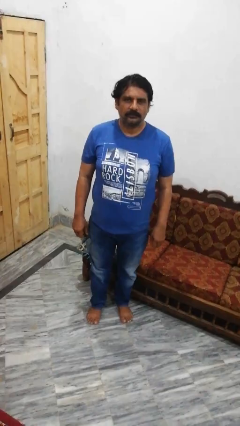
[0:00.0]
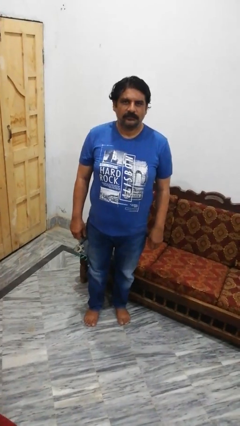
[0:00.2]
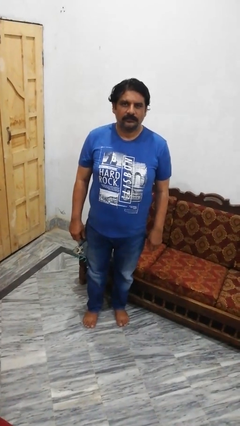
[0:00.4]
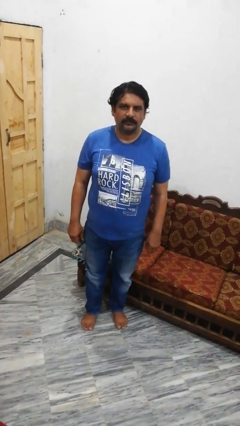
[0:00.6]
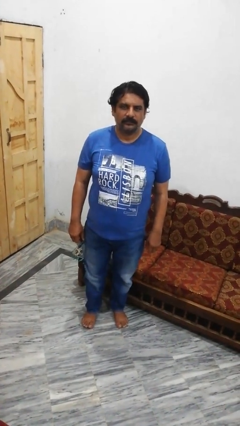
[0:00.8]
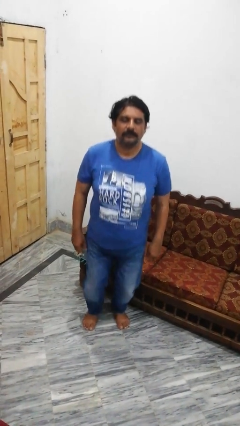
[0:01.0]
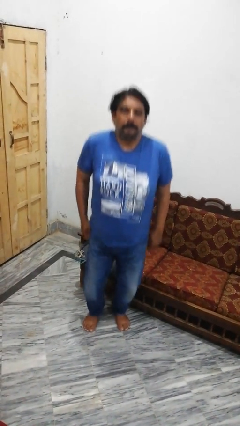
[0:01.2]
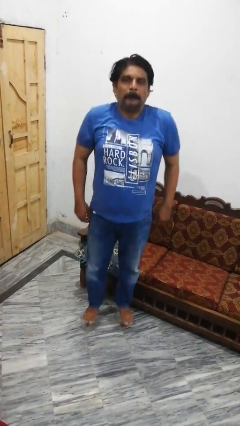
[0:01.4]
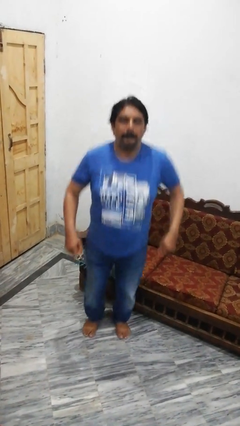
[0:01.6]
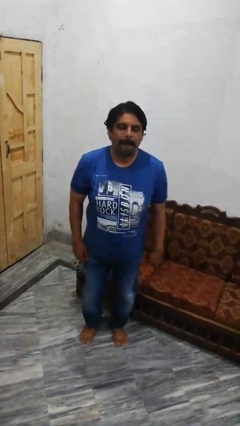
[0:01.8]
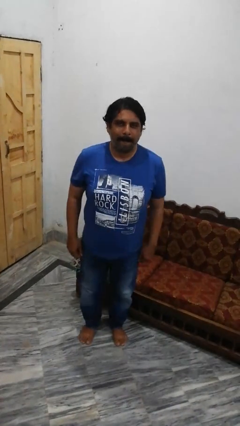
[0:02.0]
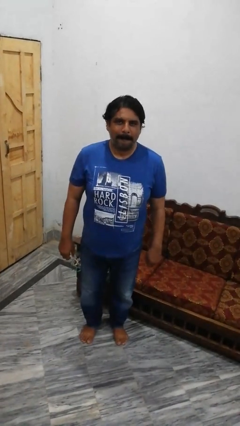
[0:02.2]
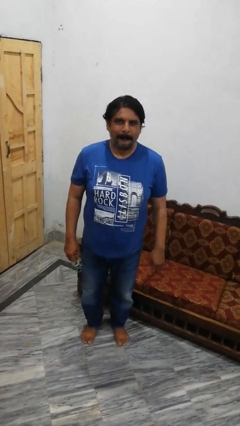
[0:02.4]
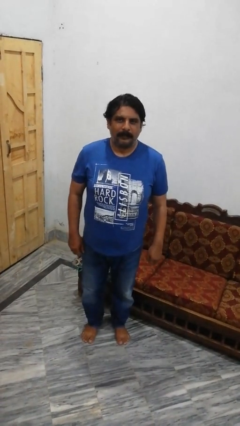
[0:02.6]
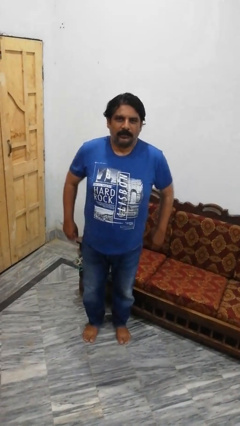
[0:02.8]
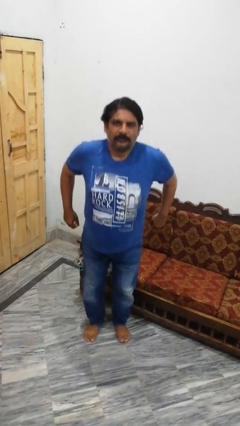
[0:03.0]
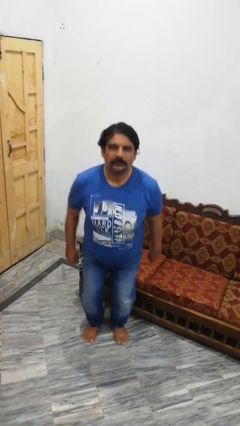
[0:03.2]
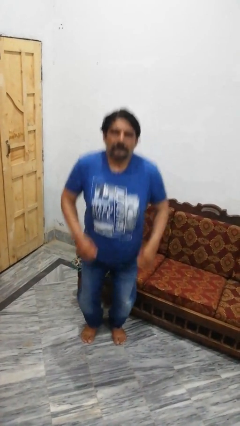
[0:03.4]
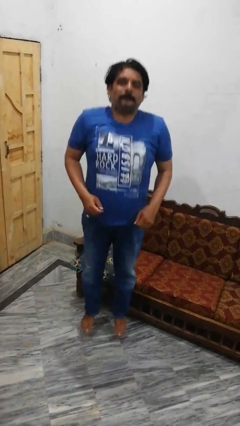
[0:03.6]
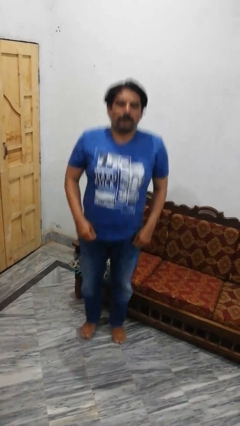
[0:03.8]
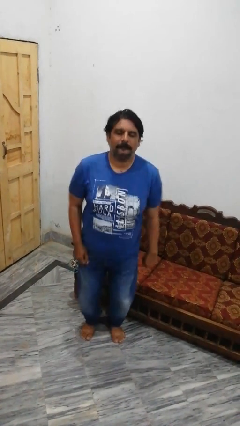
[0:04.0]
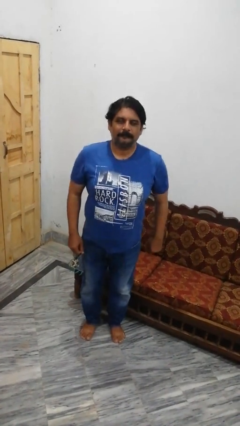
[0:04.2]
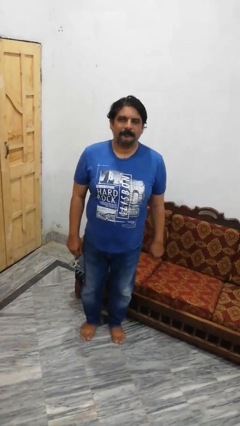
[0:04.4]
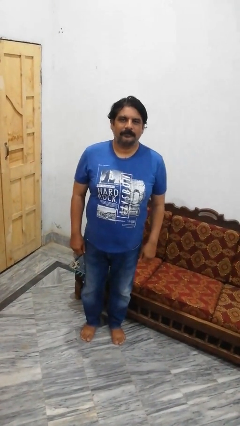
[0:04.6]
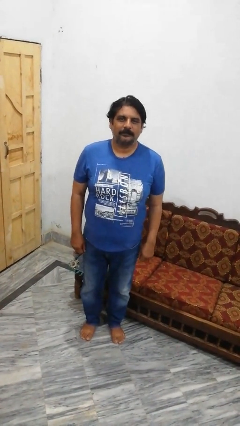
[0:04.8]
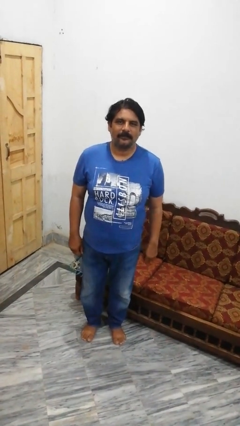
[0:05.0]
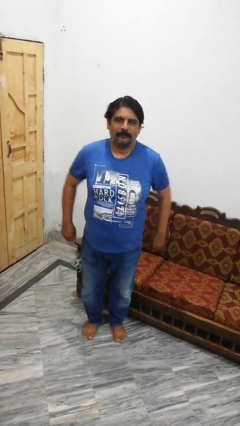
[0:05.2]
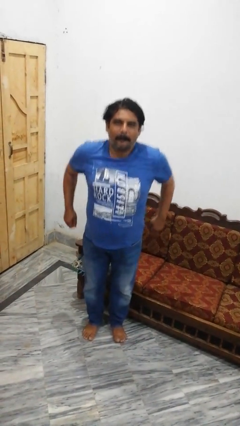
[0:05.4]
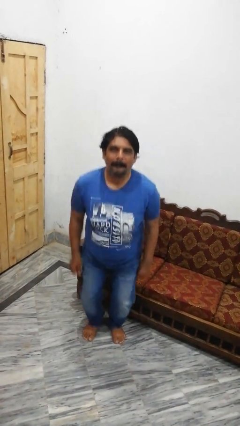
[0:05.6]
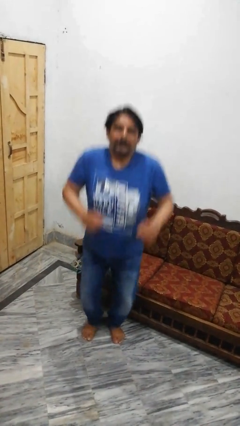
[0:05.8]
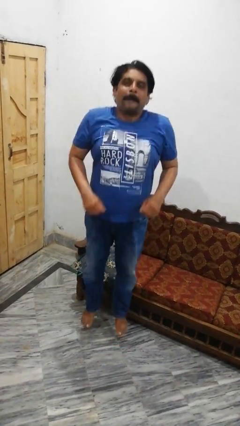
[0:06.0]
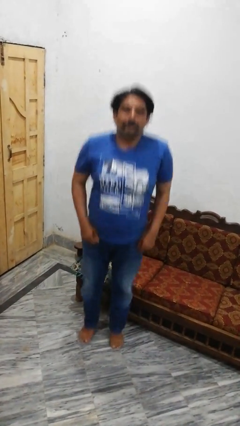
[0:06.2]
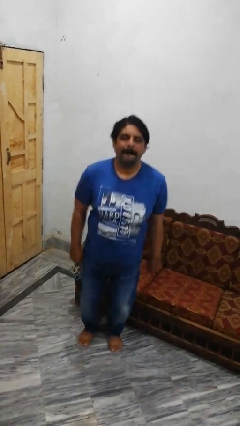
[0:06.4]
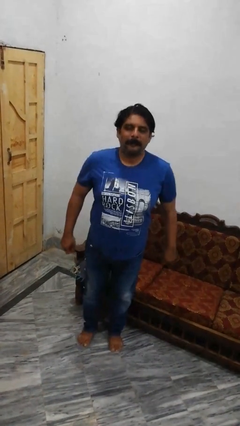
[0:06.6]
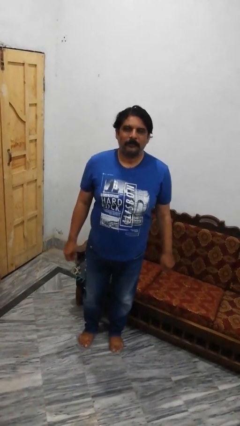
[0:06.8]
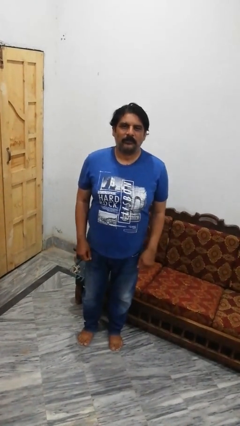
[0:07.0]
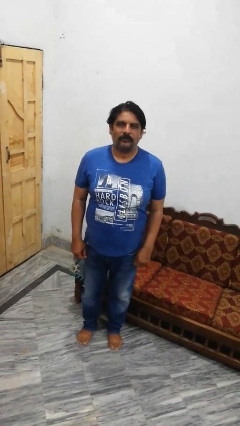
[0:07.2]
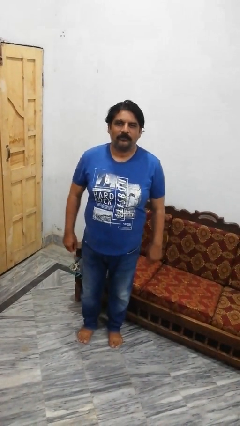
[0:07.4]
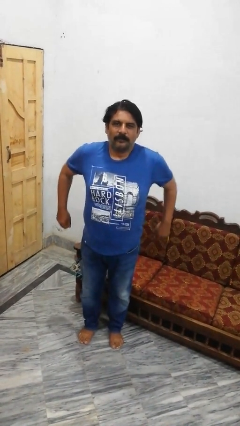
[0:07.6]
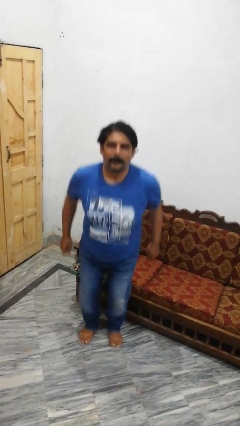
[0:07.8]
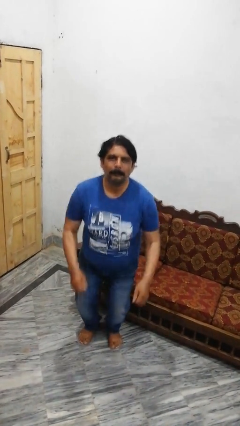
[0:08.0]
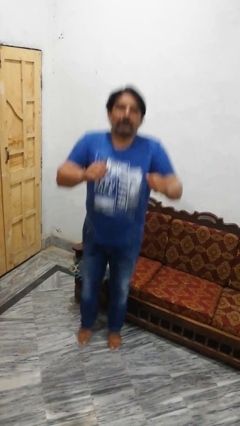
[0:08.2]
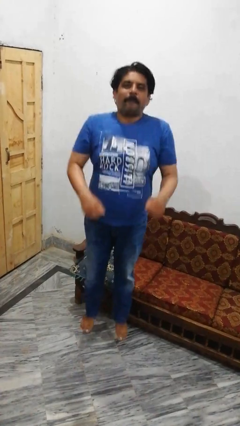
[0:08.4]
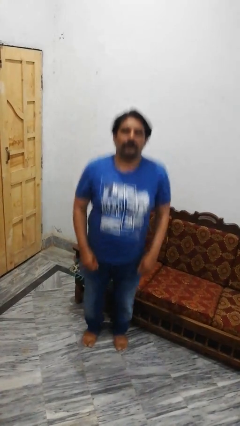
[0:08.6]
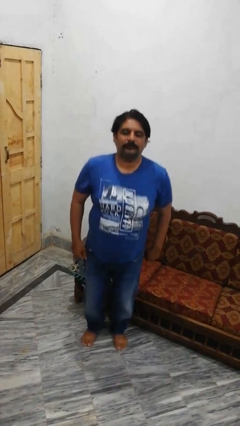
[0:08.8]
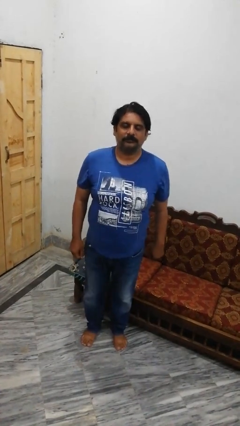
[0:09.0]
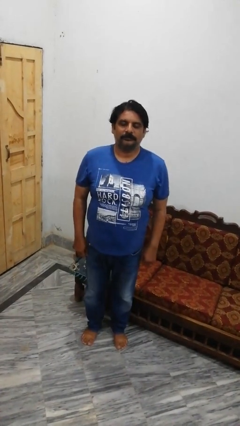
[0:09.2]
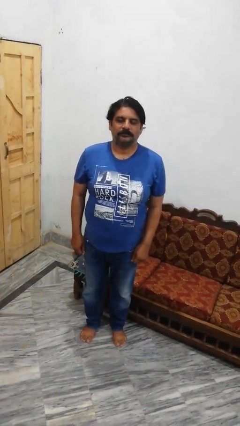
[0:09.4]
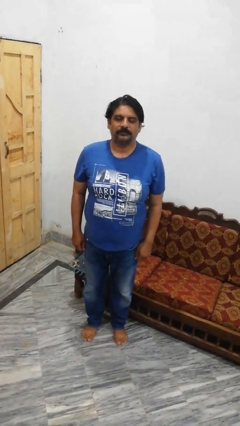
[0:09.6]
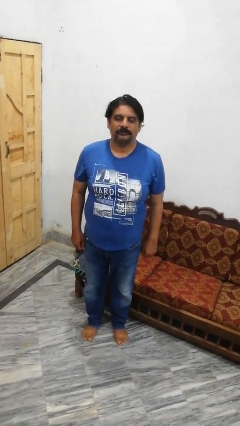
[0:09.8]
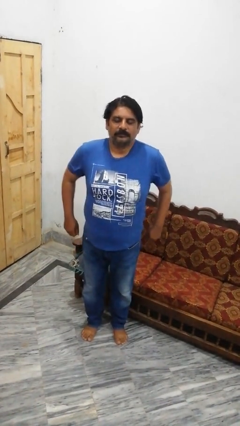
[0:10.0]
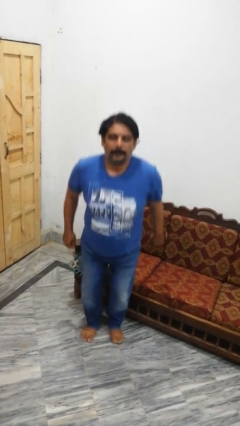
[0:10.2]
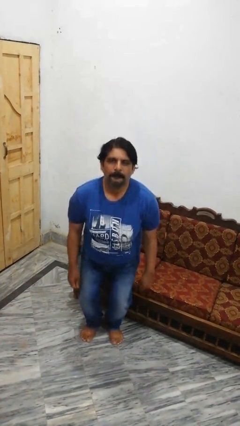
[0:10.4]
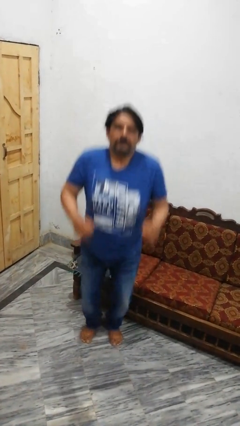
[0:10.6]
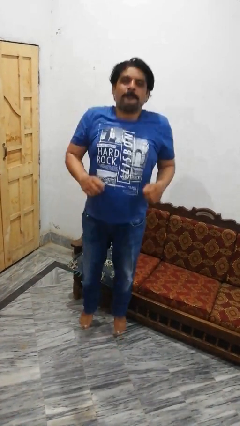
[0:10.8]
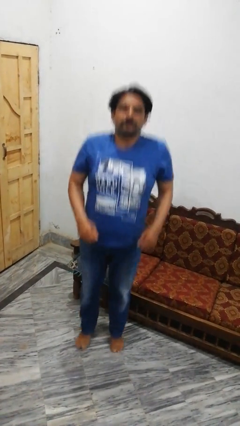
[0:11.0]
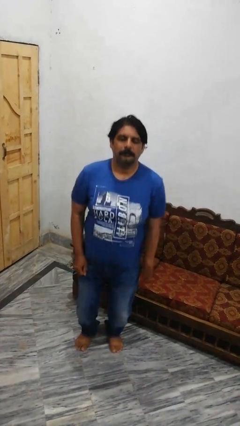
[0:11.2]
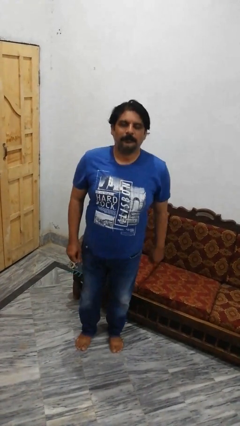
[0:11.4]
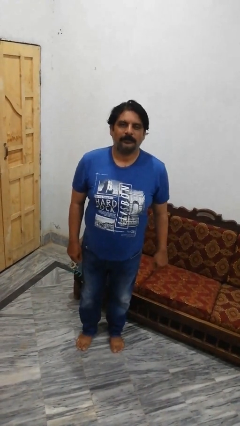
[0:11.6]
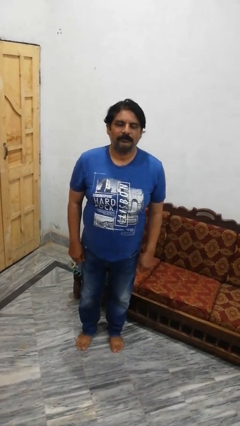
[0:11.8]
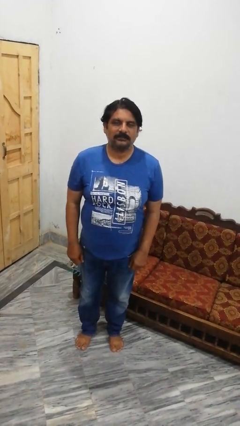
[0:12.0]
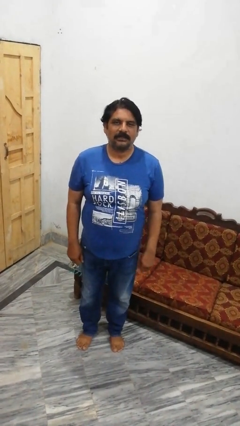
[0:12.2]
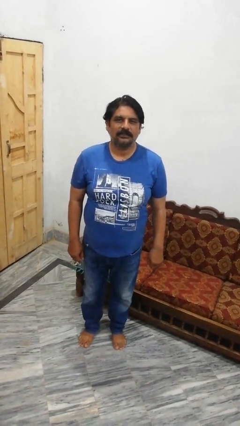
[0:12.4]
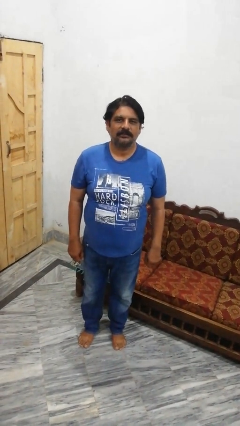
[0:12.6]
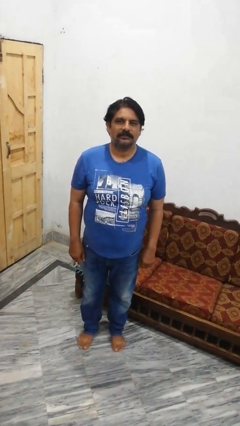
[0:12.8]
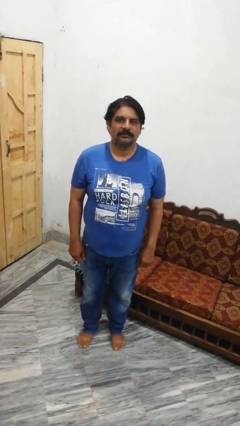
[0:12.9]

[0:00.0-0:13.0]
person jumps

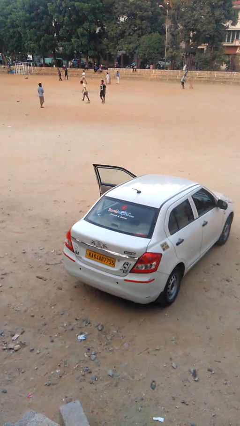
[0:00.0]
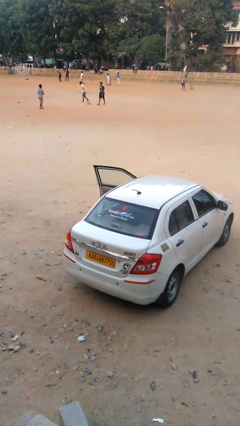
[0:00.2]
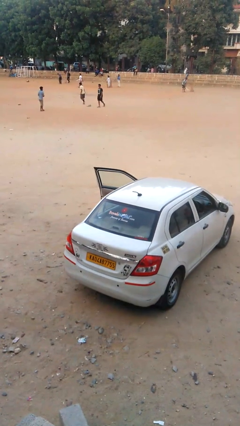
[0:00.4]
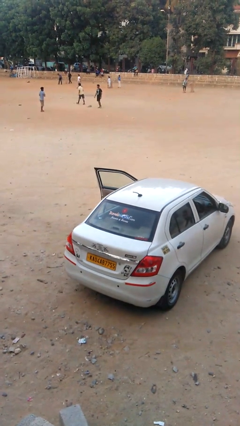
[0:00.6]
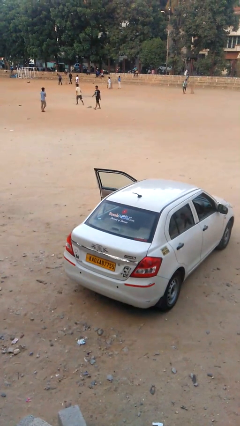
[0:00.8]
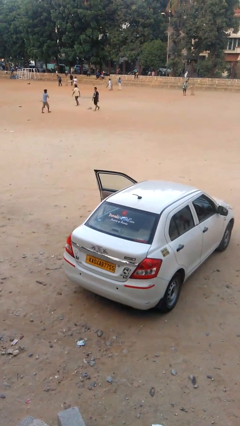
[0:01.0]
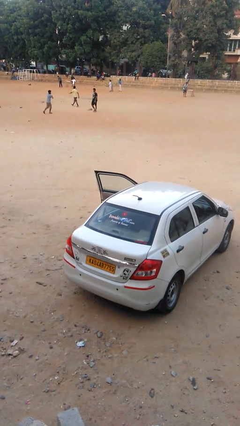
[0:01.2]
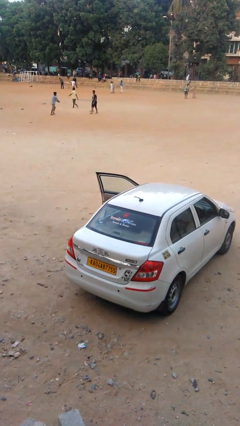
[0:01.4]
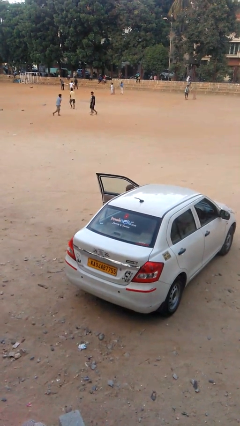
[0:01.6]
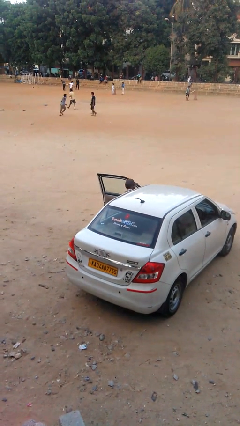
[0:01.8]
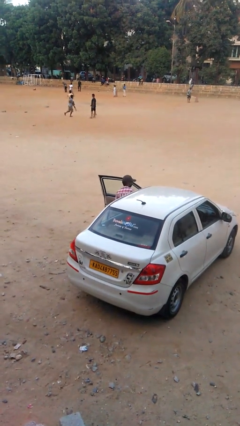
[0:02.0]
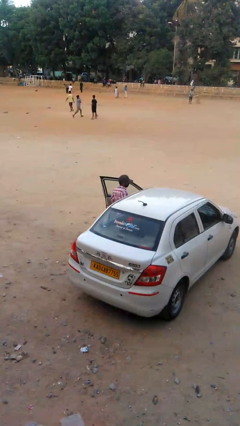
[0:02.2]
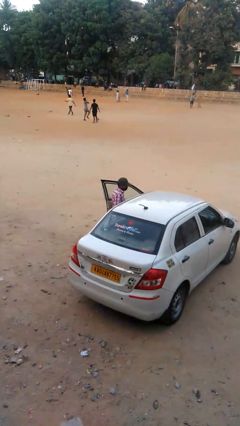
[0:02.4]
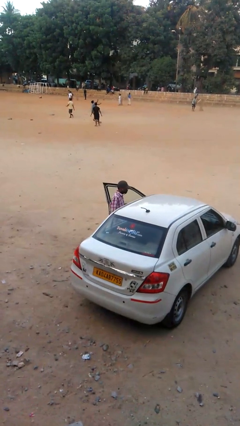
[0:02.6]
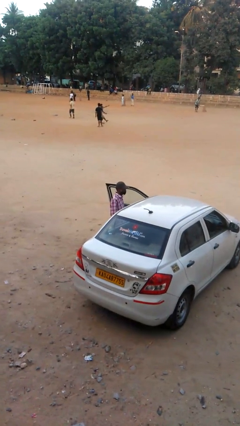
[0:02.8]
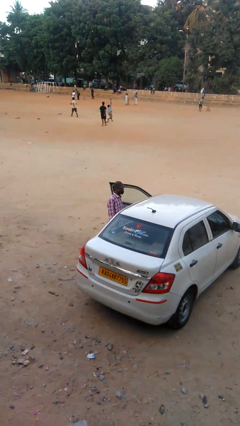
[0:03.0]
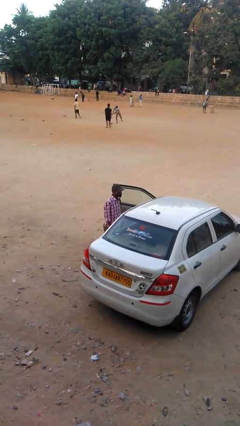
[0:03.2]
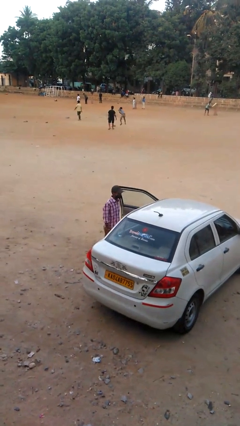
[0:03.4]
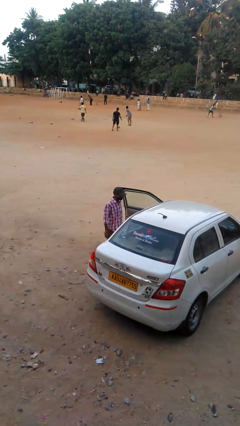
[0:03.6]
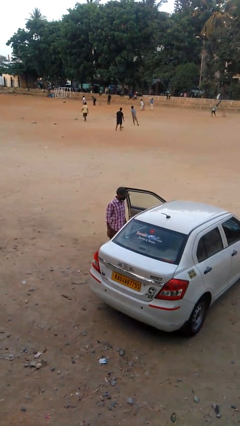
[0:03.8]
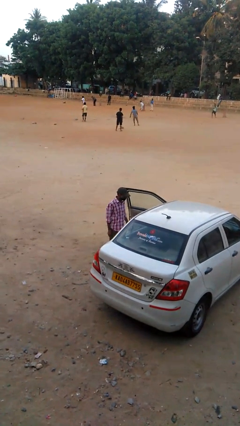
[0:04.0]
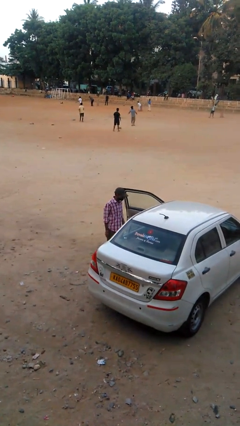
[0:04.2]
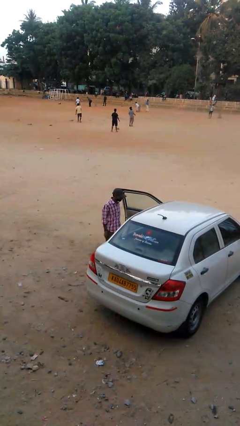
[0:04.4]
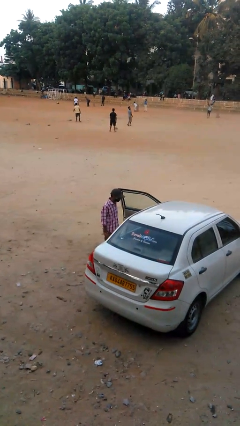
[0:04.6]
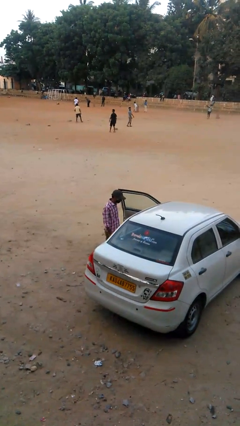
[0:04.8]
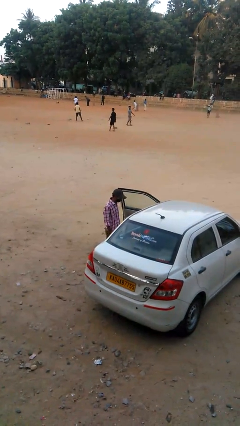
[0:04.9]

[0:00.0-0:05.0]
person exits car

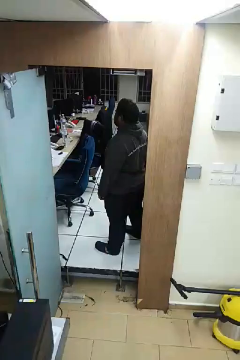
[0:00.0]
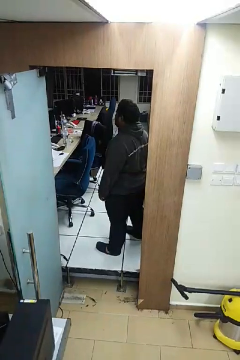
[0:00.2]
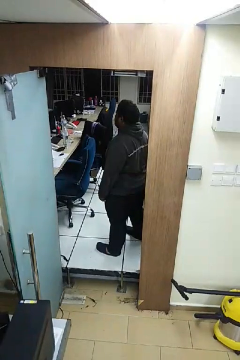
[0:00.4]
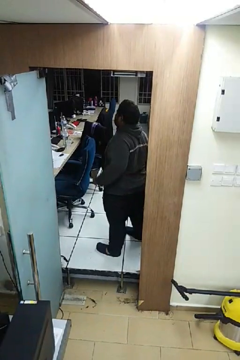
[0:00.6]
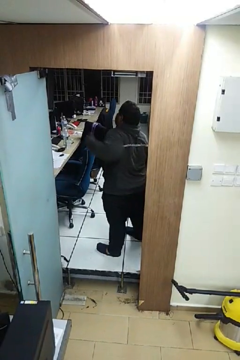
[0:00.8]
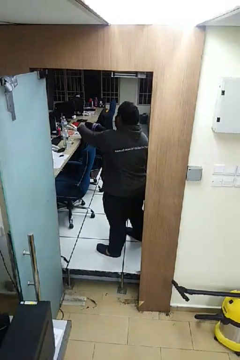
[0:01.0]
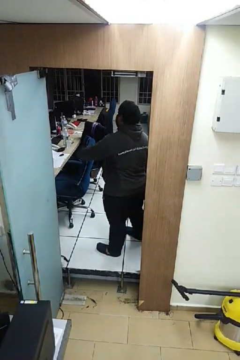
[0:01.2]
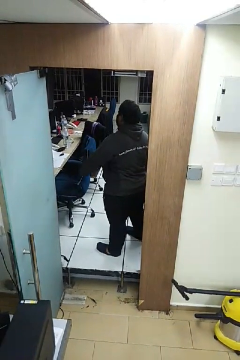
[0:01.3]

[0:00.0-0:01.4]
person punches
